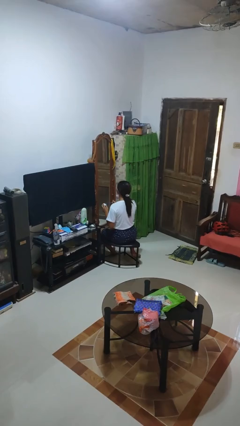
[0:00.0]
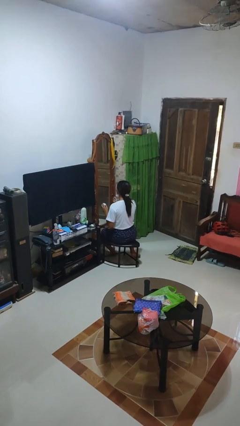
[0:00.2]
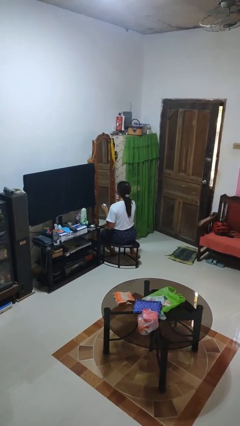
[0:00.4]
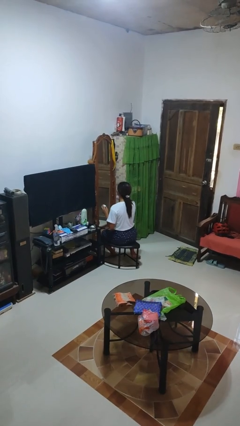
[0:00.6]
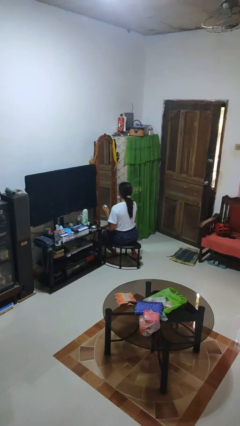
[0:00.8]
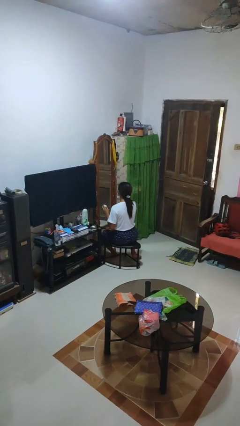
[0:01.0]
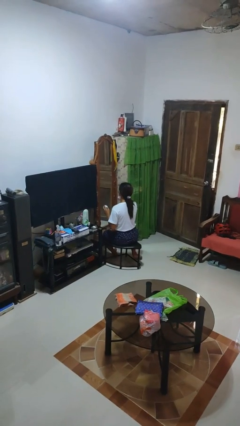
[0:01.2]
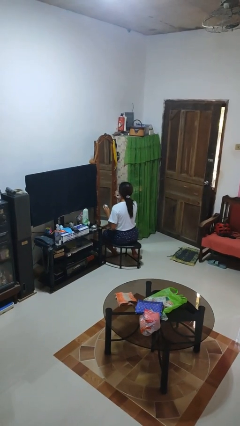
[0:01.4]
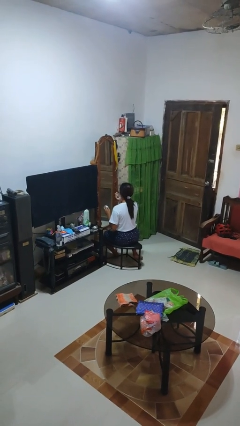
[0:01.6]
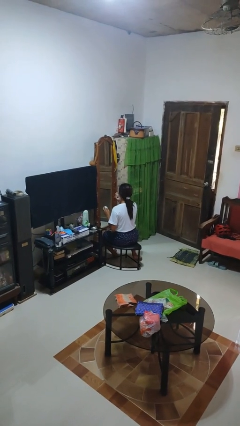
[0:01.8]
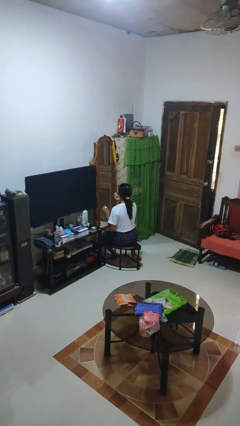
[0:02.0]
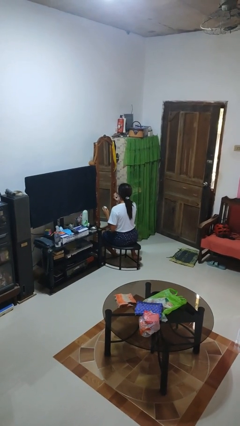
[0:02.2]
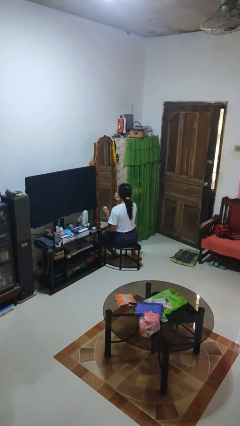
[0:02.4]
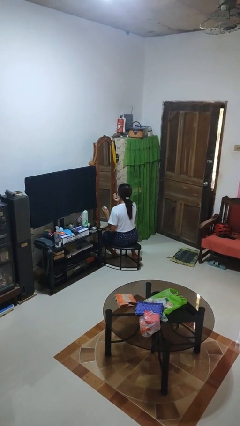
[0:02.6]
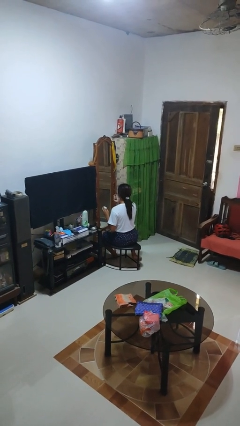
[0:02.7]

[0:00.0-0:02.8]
person applies eye makeup

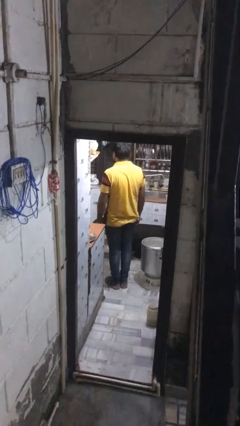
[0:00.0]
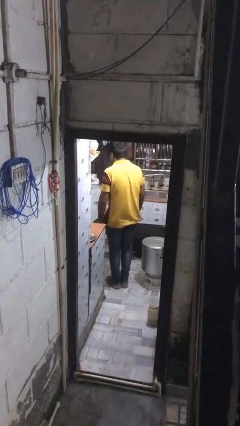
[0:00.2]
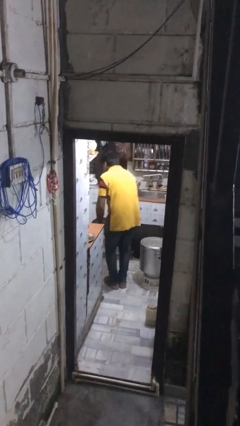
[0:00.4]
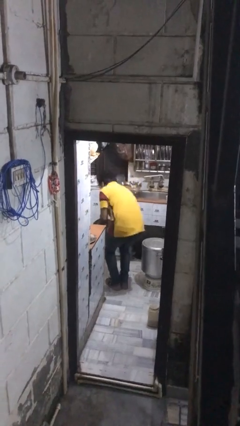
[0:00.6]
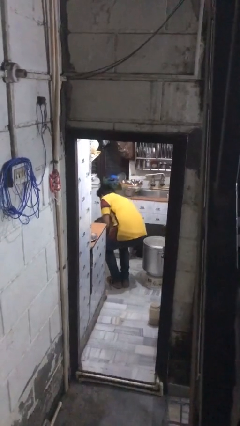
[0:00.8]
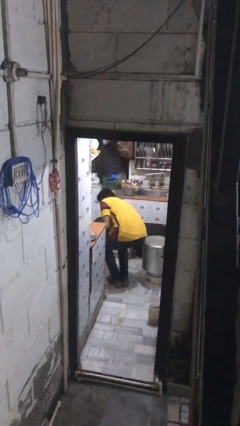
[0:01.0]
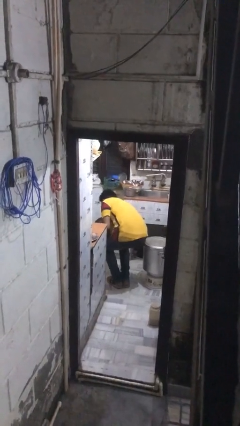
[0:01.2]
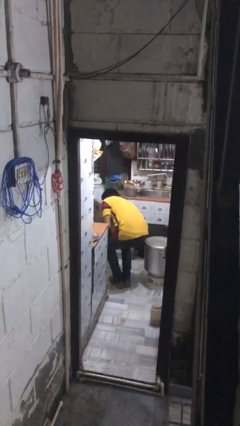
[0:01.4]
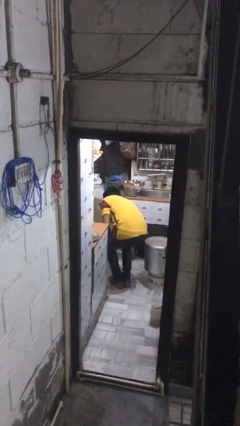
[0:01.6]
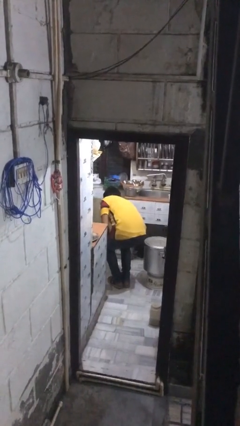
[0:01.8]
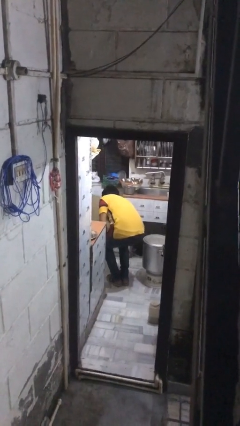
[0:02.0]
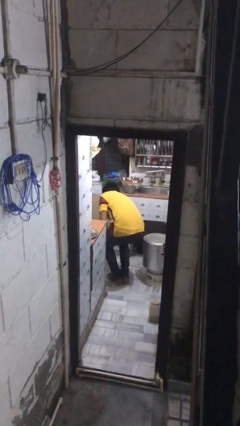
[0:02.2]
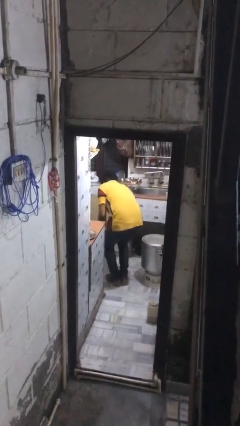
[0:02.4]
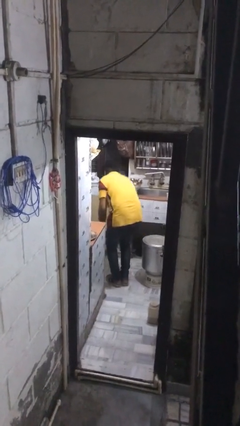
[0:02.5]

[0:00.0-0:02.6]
person opens kitchen drawer

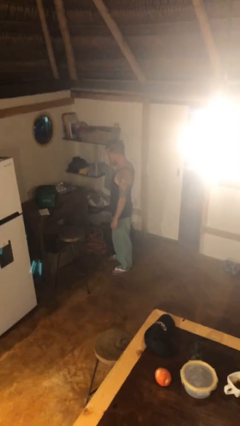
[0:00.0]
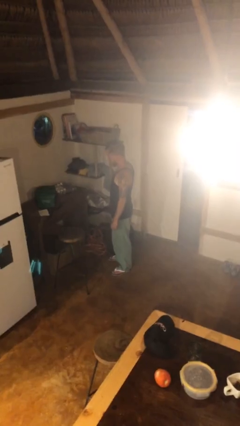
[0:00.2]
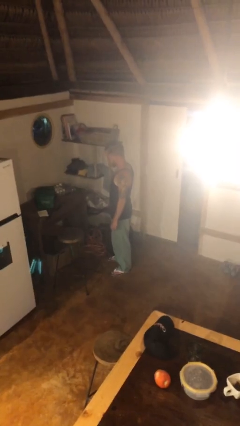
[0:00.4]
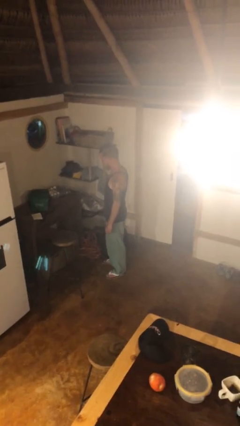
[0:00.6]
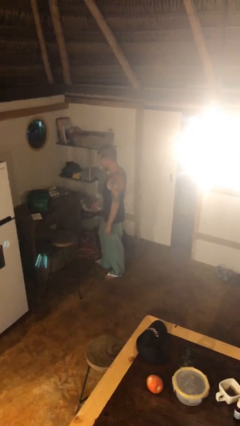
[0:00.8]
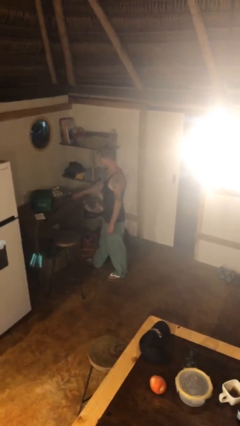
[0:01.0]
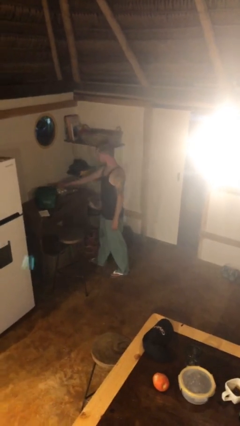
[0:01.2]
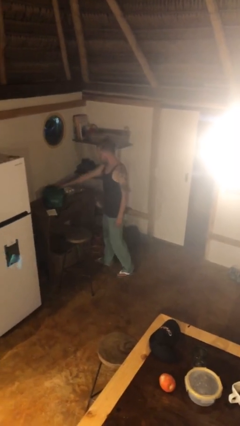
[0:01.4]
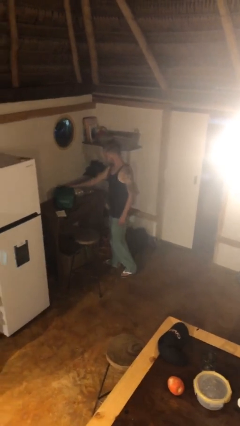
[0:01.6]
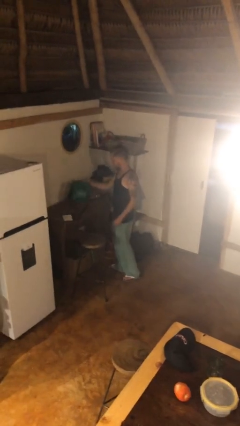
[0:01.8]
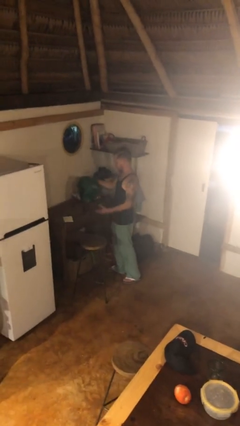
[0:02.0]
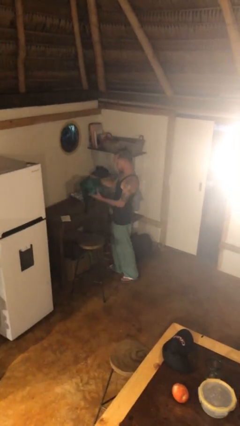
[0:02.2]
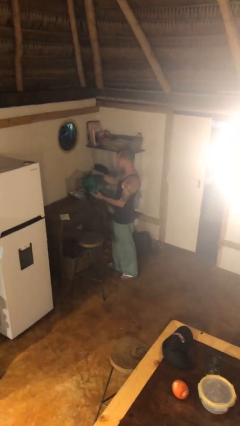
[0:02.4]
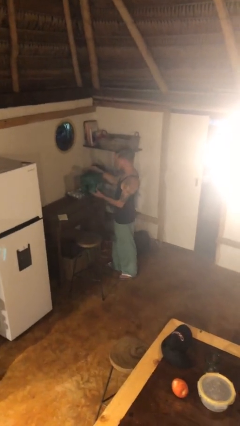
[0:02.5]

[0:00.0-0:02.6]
person picks up object from table

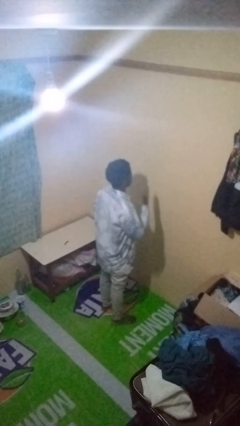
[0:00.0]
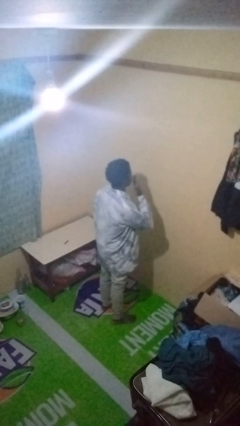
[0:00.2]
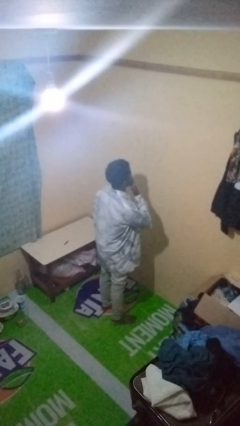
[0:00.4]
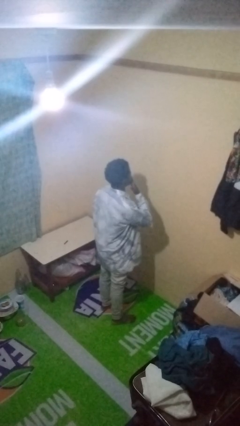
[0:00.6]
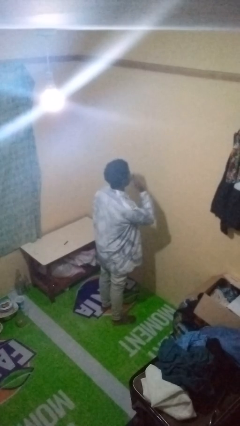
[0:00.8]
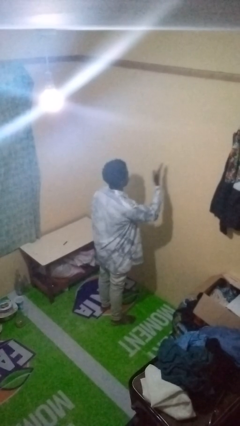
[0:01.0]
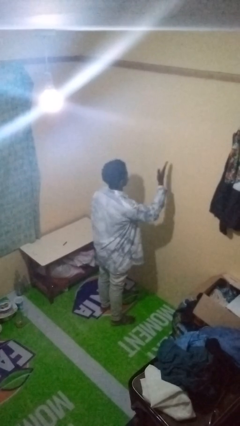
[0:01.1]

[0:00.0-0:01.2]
person gestures blow kiss

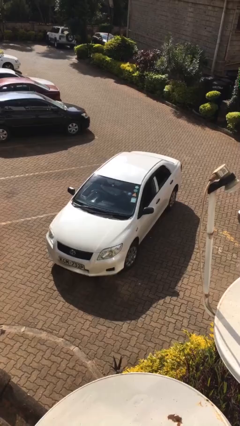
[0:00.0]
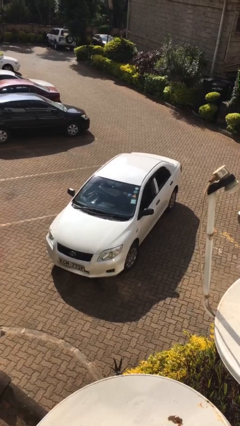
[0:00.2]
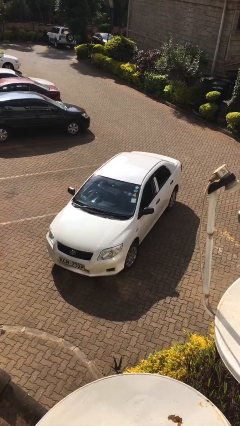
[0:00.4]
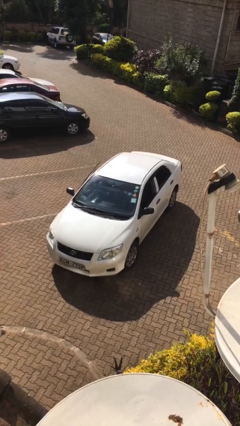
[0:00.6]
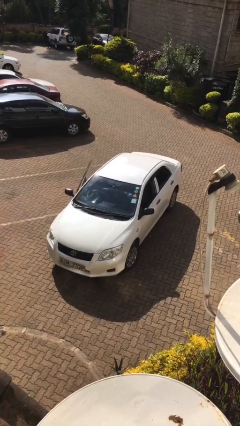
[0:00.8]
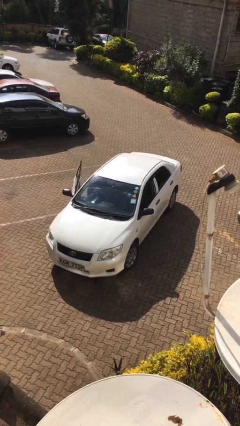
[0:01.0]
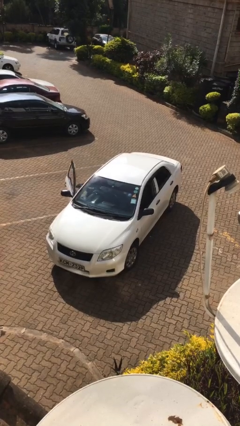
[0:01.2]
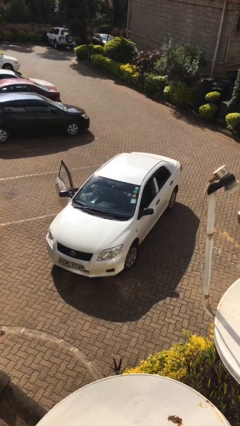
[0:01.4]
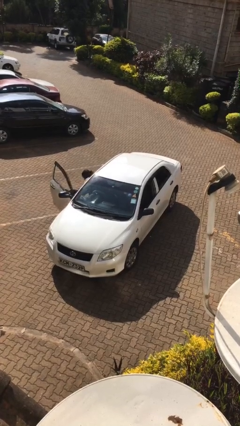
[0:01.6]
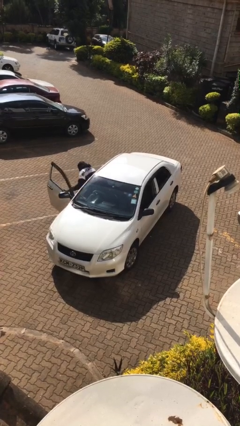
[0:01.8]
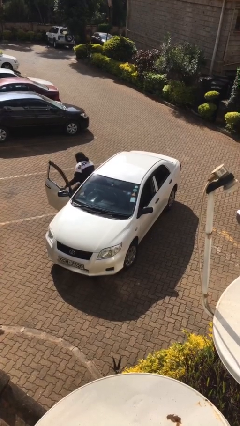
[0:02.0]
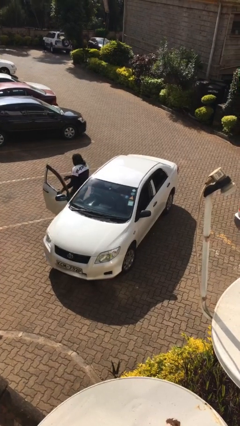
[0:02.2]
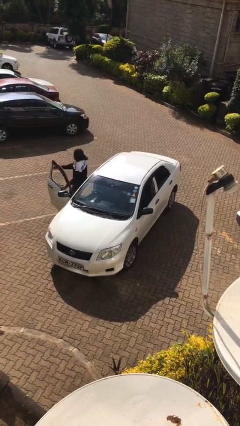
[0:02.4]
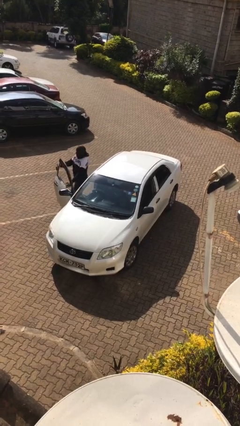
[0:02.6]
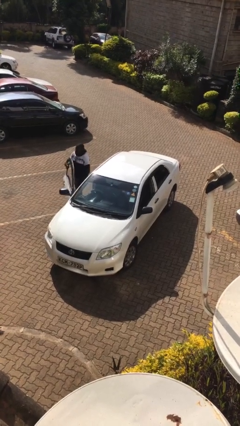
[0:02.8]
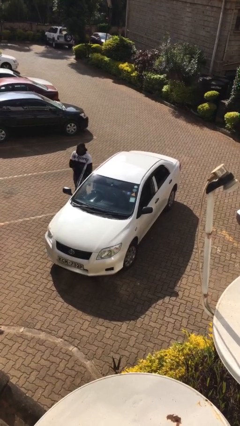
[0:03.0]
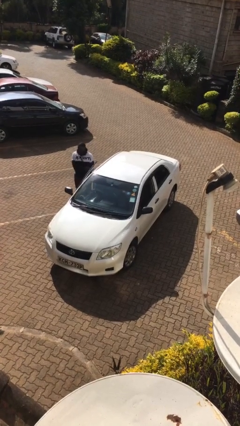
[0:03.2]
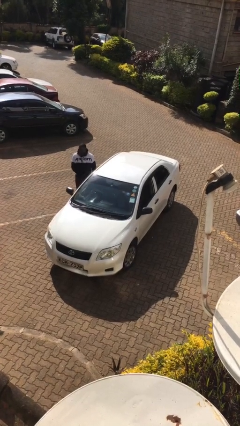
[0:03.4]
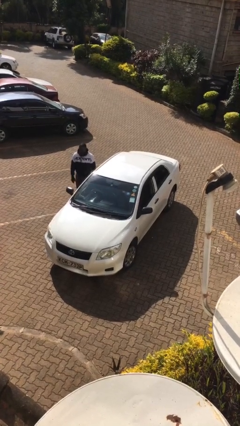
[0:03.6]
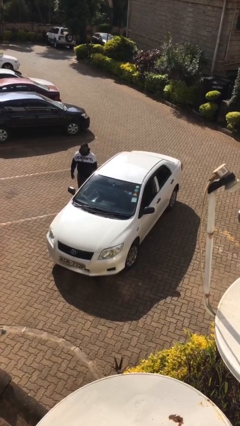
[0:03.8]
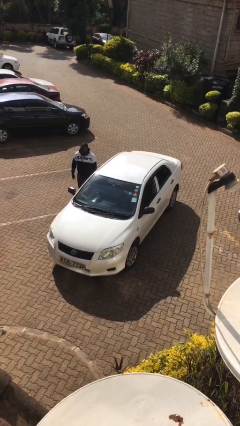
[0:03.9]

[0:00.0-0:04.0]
car drops off person

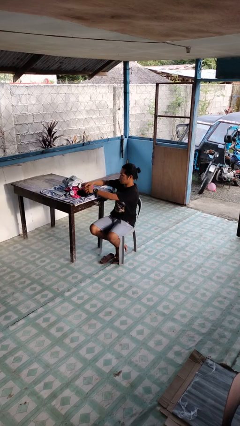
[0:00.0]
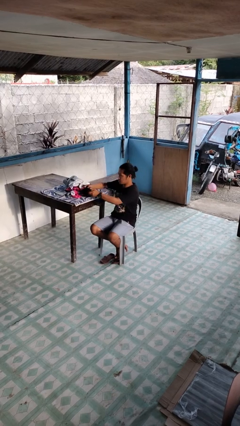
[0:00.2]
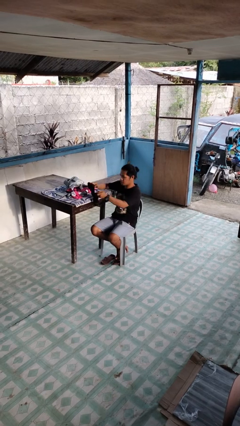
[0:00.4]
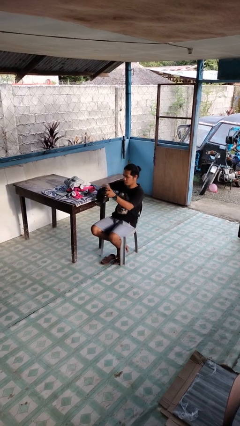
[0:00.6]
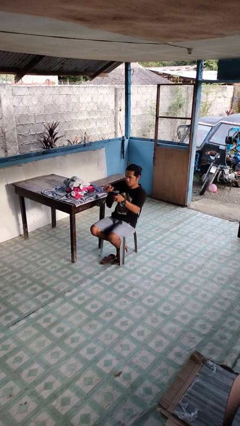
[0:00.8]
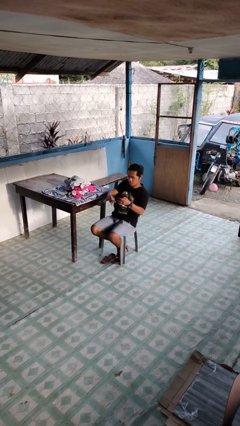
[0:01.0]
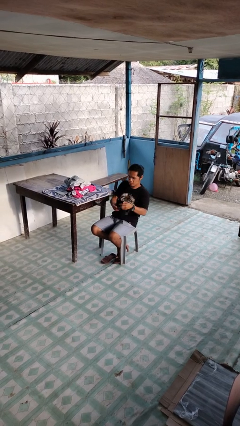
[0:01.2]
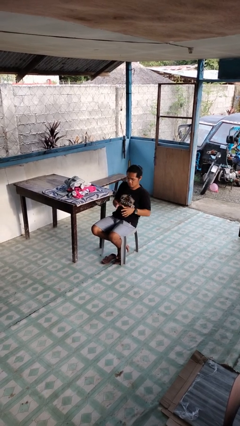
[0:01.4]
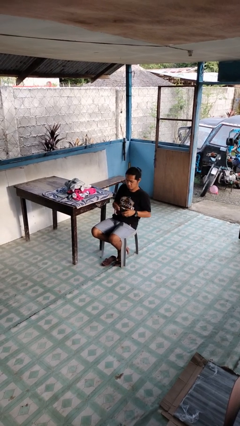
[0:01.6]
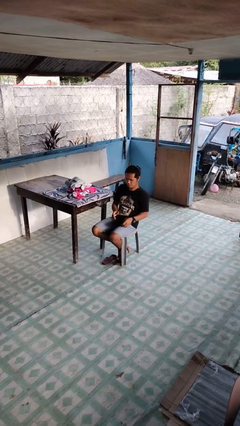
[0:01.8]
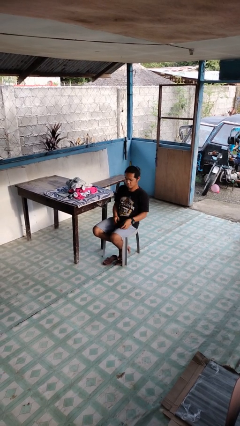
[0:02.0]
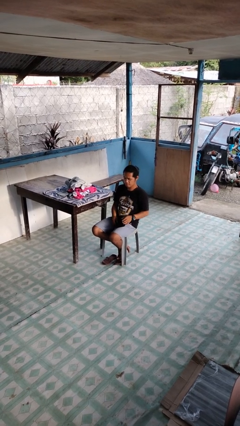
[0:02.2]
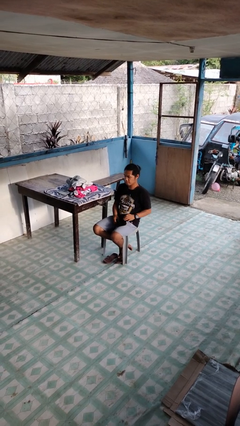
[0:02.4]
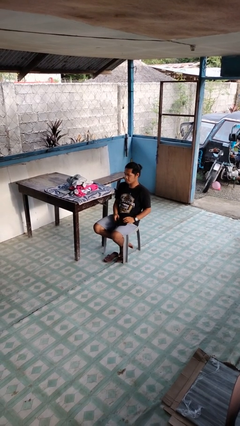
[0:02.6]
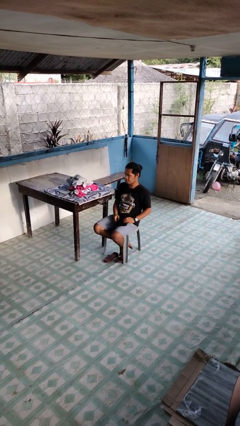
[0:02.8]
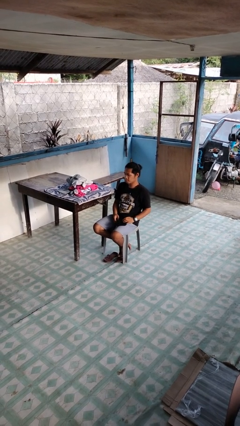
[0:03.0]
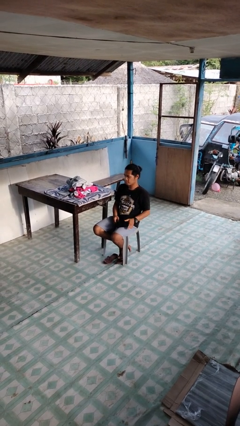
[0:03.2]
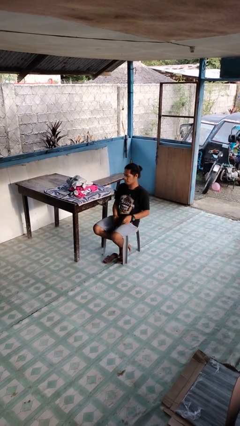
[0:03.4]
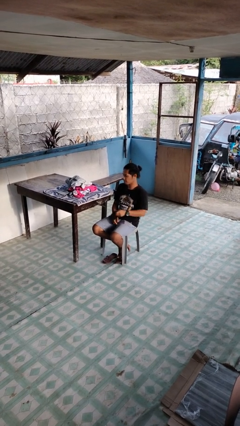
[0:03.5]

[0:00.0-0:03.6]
person folds socks

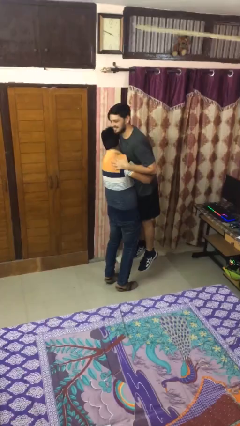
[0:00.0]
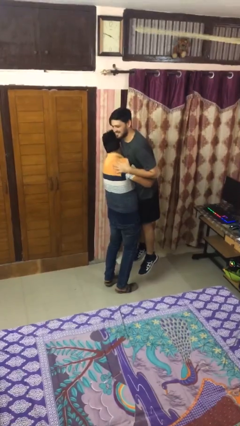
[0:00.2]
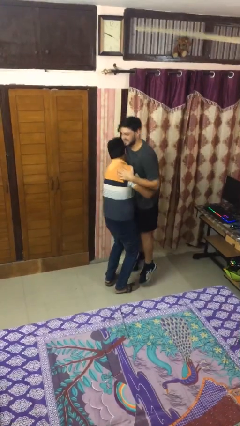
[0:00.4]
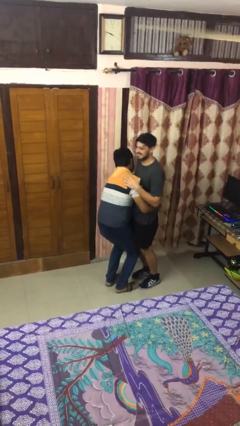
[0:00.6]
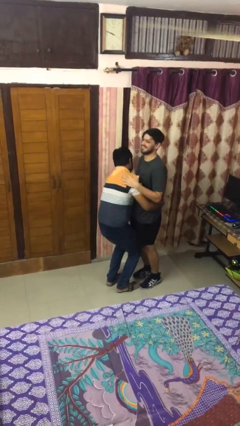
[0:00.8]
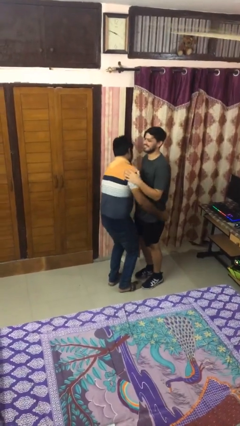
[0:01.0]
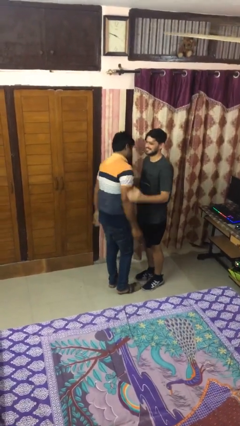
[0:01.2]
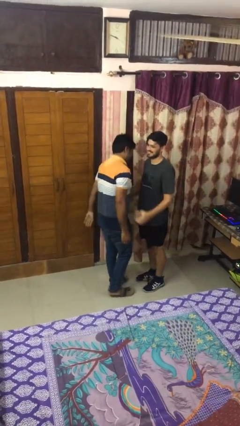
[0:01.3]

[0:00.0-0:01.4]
person puts down person
